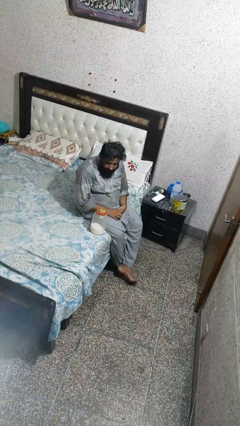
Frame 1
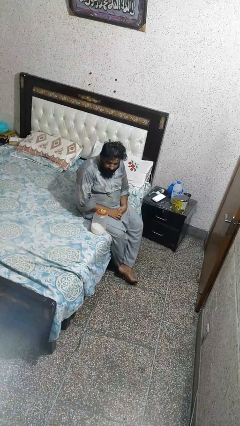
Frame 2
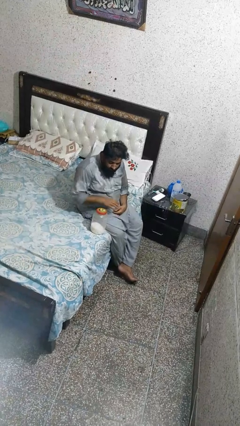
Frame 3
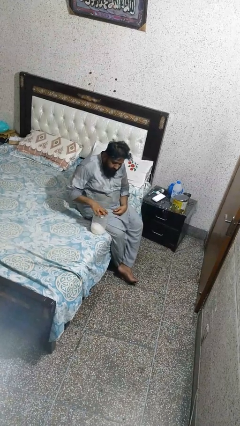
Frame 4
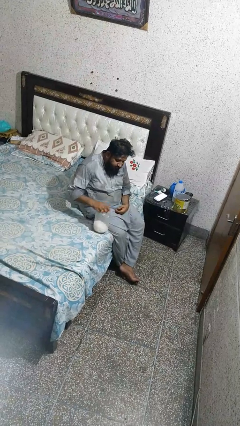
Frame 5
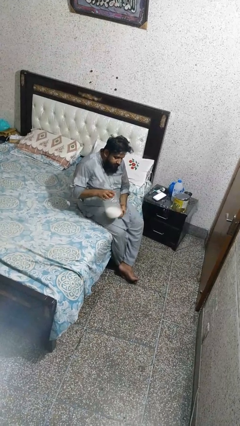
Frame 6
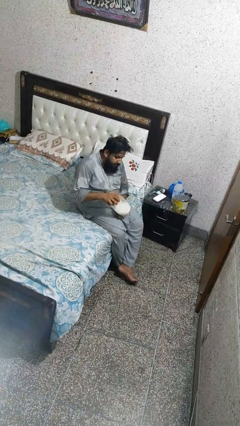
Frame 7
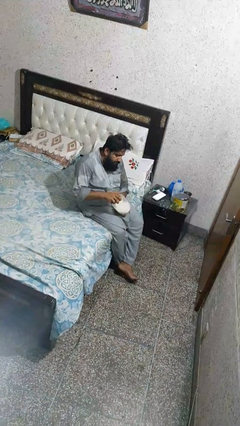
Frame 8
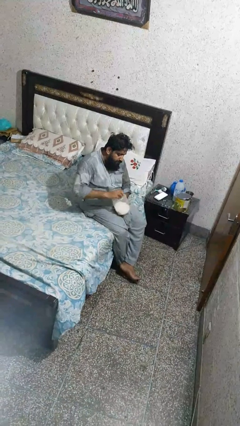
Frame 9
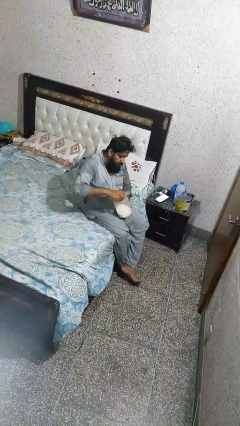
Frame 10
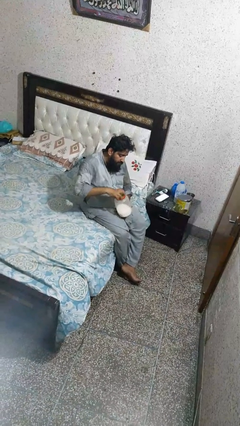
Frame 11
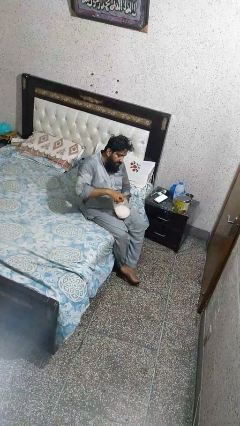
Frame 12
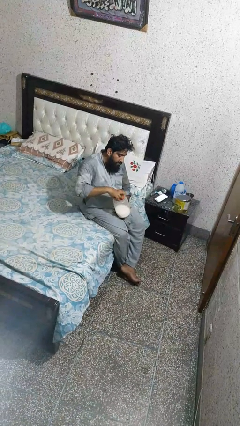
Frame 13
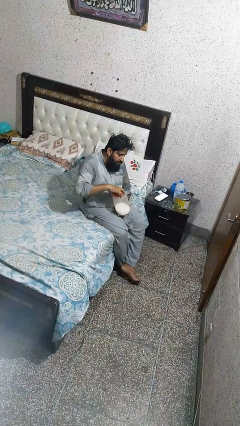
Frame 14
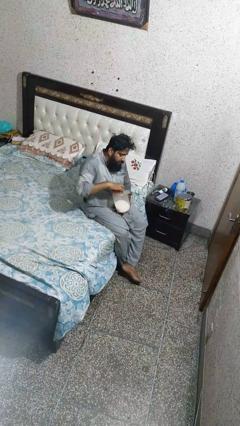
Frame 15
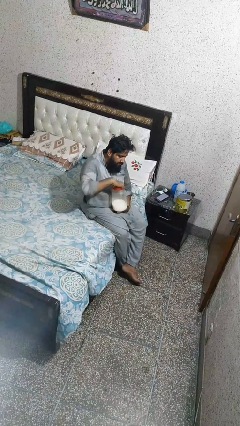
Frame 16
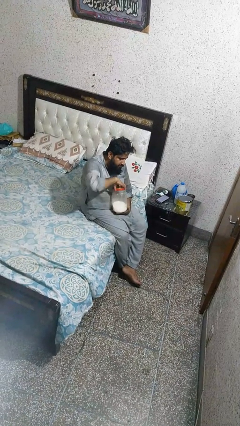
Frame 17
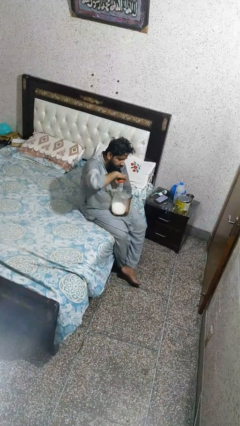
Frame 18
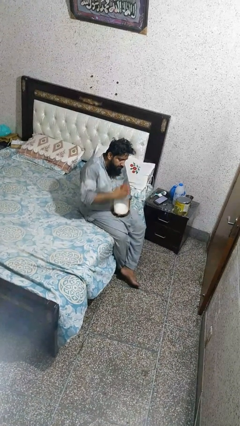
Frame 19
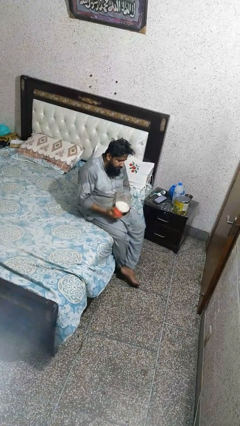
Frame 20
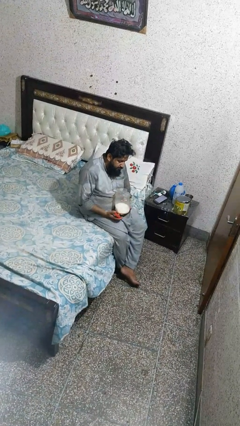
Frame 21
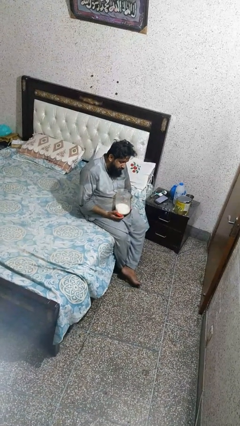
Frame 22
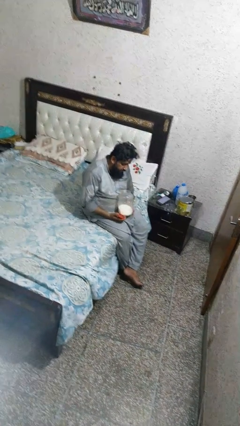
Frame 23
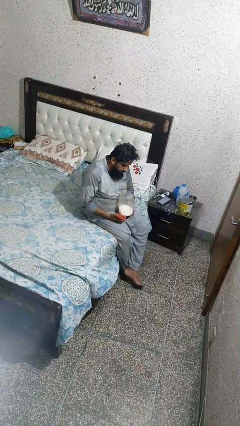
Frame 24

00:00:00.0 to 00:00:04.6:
person opens jar

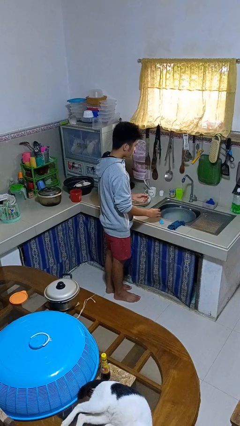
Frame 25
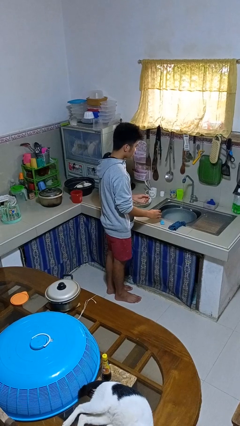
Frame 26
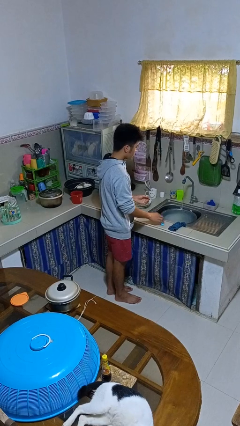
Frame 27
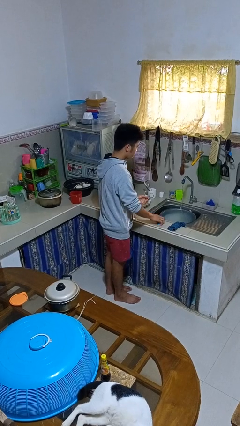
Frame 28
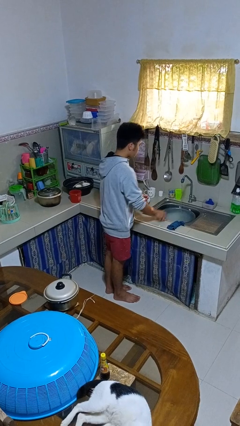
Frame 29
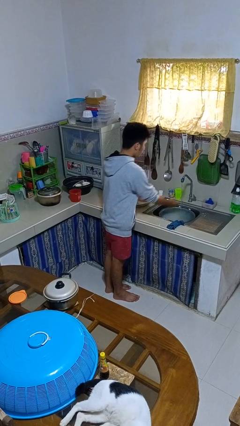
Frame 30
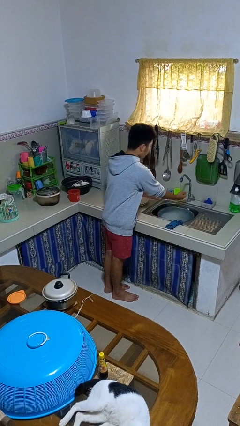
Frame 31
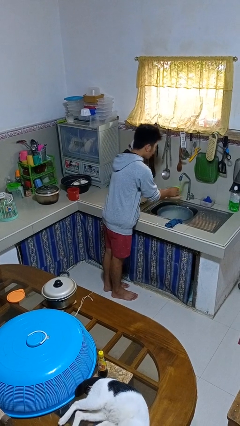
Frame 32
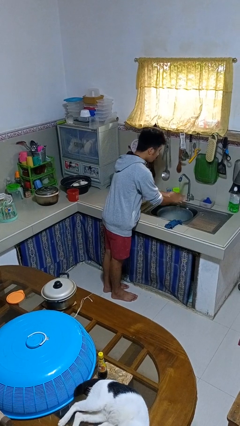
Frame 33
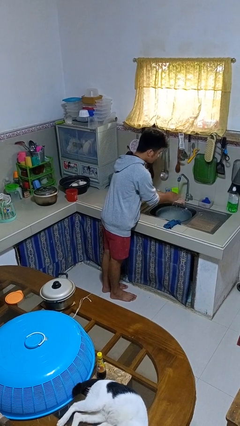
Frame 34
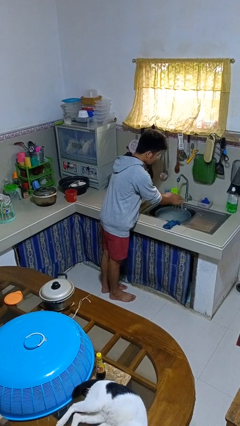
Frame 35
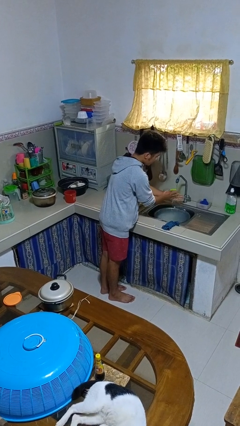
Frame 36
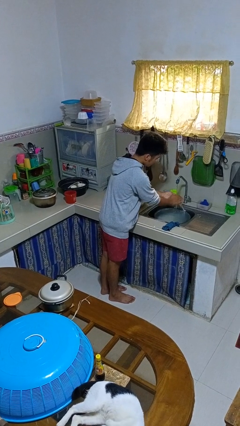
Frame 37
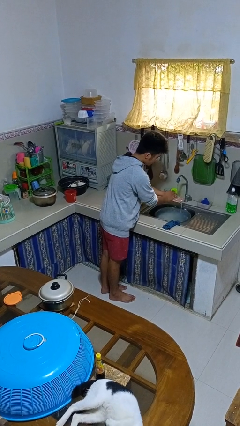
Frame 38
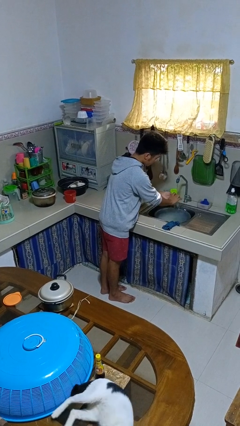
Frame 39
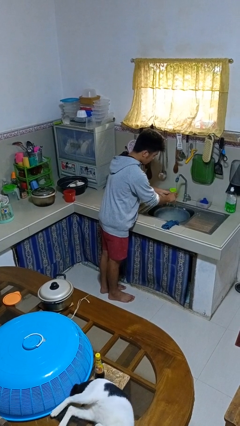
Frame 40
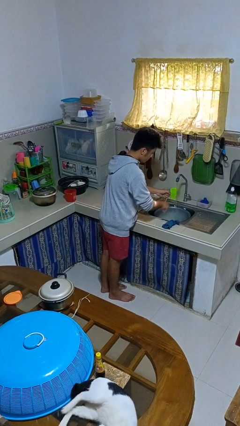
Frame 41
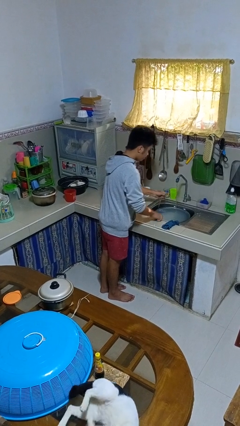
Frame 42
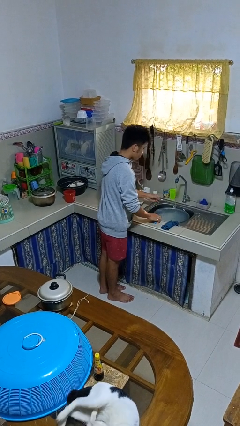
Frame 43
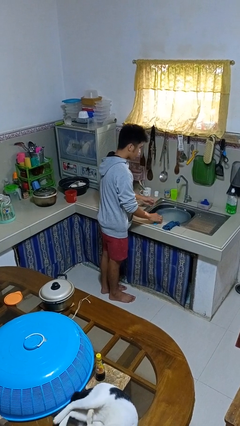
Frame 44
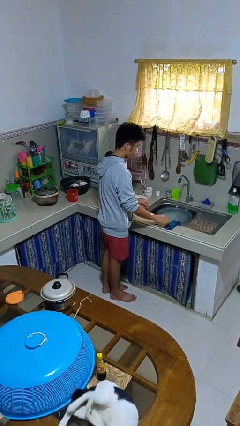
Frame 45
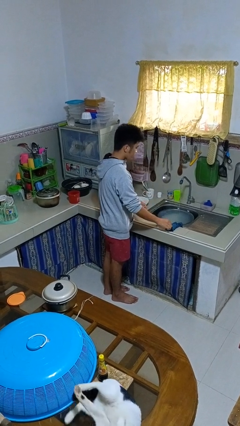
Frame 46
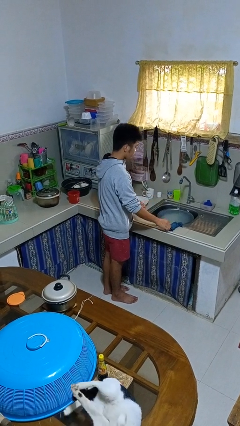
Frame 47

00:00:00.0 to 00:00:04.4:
person washes hands

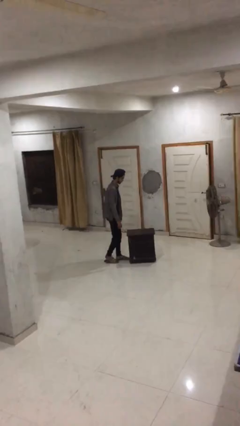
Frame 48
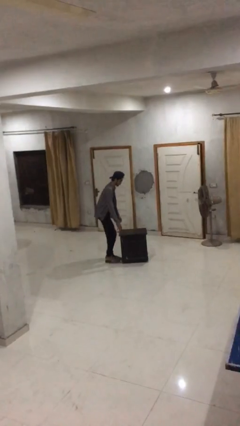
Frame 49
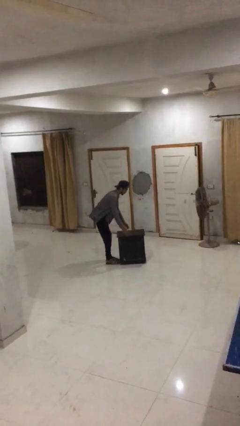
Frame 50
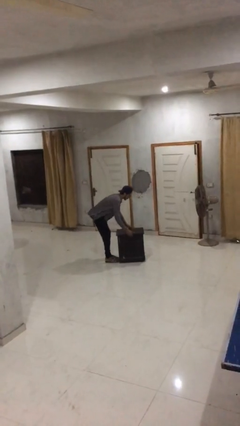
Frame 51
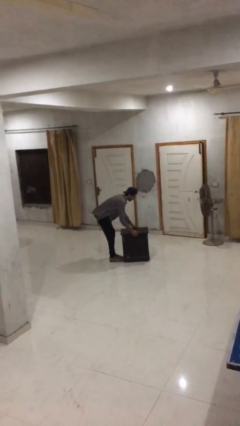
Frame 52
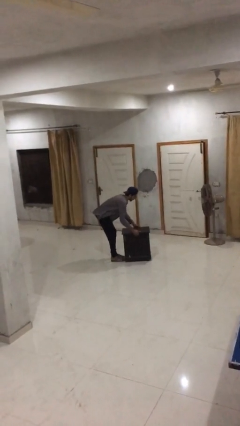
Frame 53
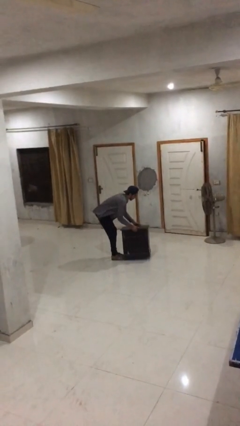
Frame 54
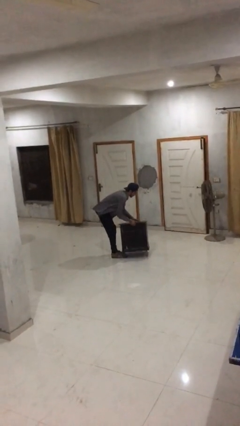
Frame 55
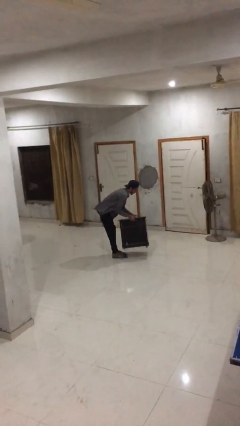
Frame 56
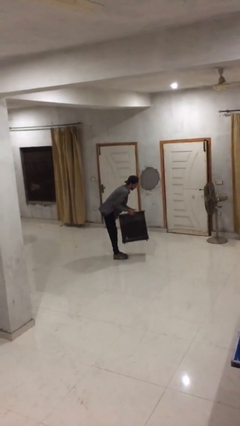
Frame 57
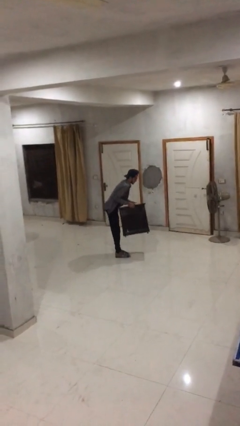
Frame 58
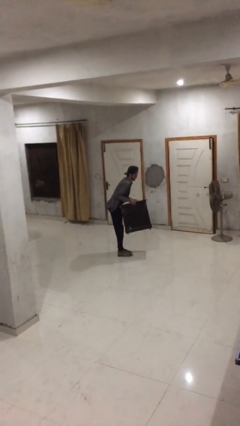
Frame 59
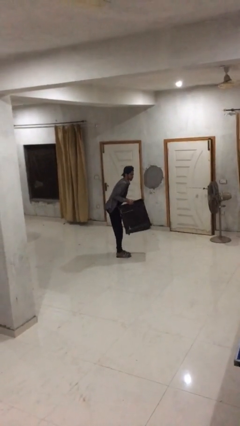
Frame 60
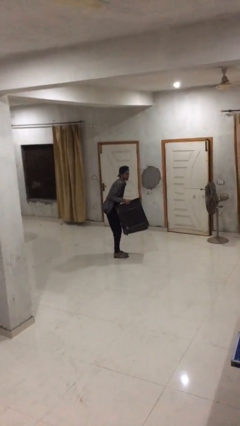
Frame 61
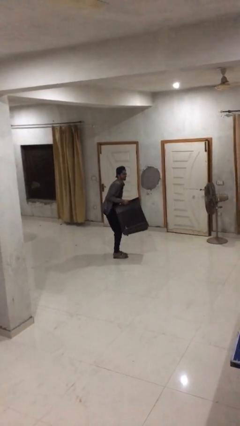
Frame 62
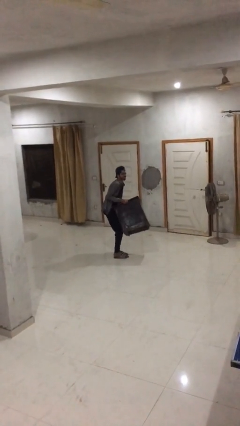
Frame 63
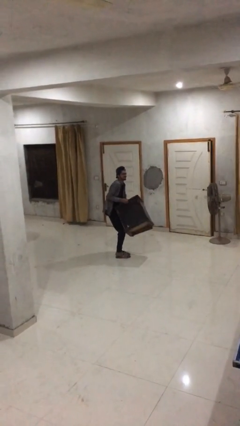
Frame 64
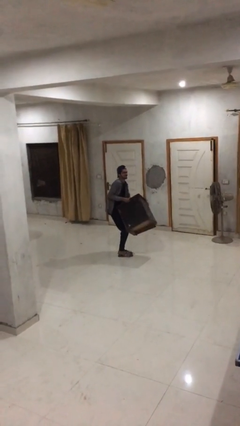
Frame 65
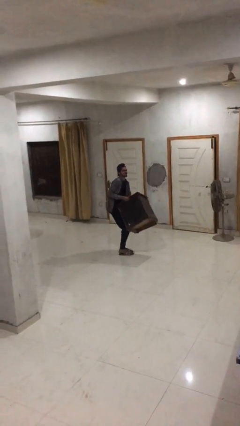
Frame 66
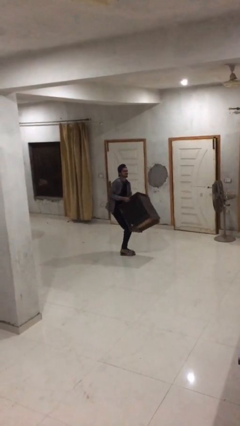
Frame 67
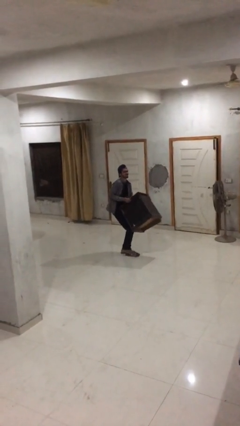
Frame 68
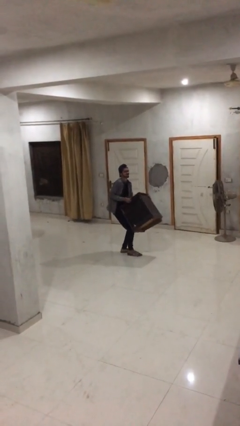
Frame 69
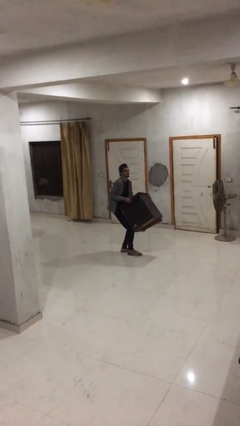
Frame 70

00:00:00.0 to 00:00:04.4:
person picks up object from floor

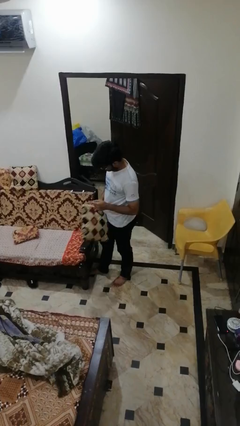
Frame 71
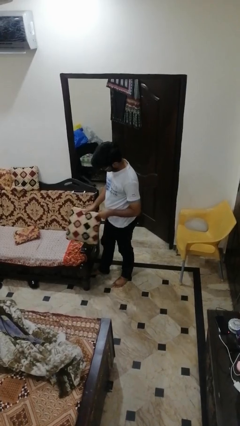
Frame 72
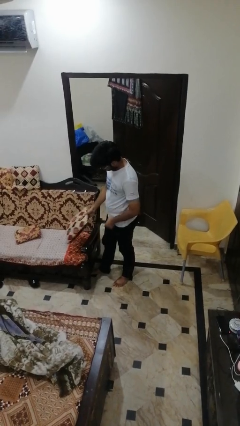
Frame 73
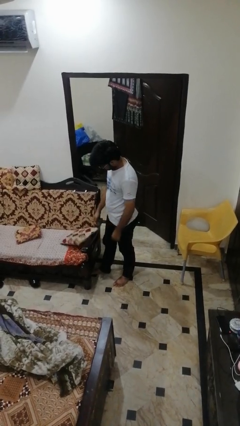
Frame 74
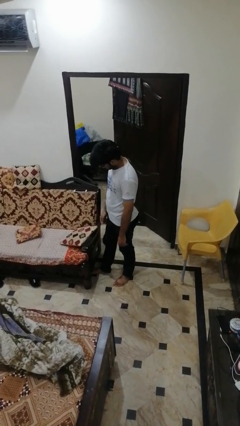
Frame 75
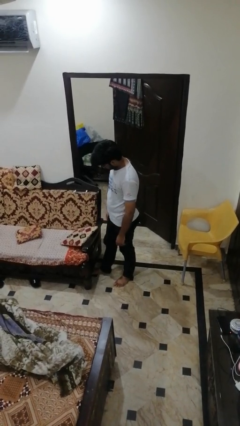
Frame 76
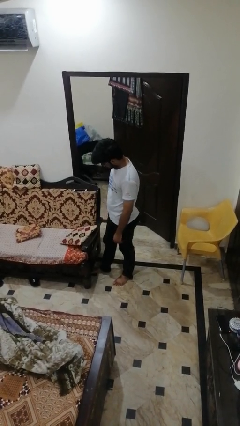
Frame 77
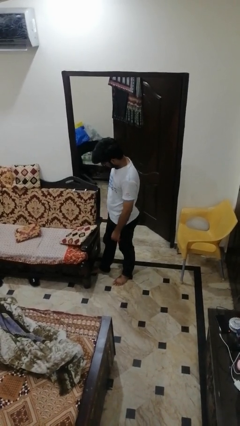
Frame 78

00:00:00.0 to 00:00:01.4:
person puts down object on couch

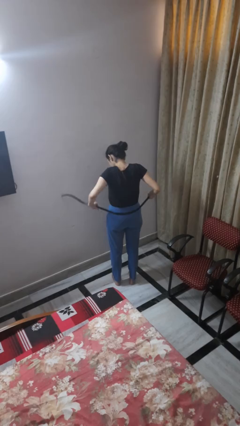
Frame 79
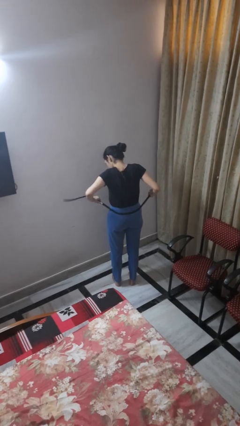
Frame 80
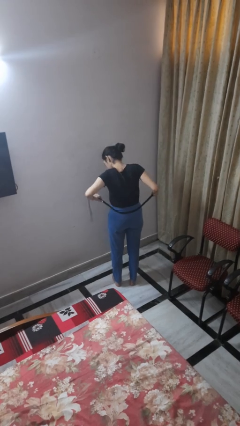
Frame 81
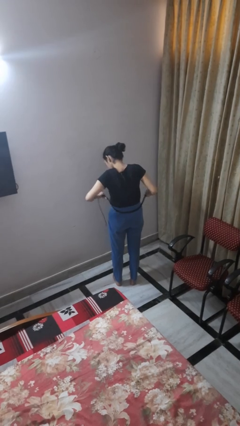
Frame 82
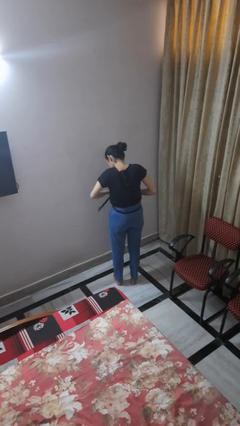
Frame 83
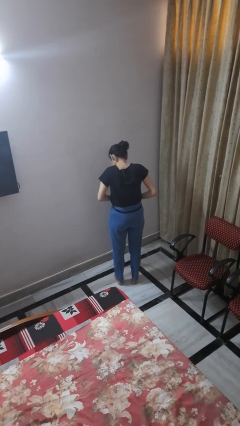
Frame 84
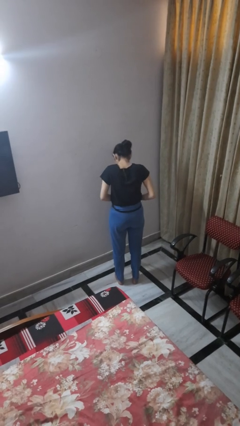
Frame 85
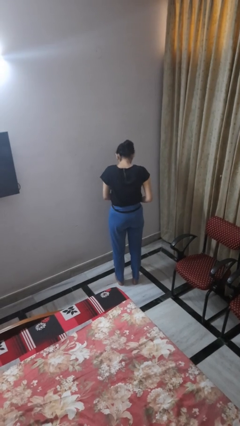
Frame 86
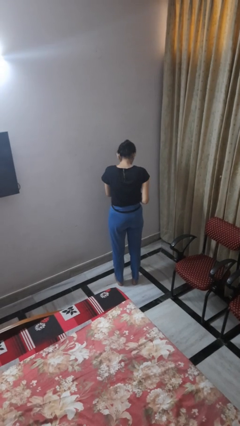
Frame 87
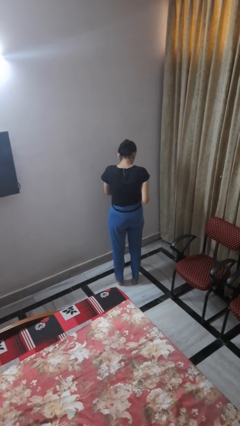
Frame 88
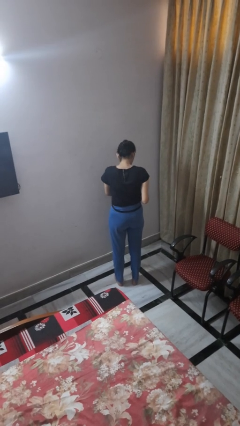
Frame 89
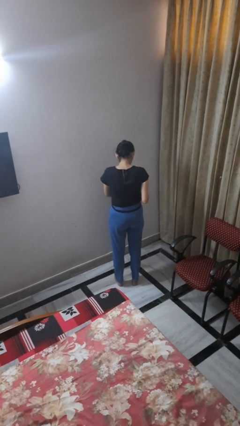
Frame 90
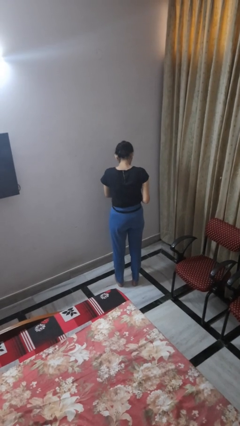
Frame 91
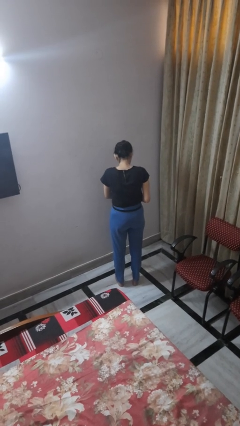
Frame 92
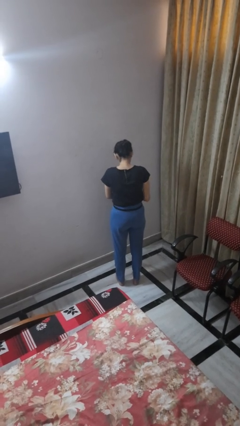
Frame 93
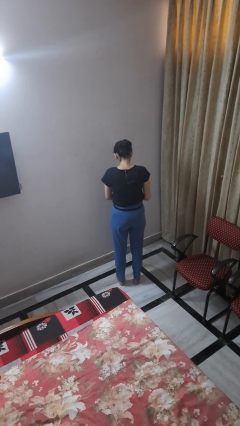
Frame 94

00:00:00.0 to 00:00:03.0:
person puts on belt
